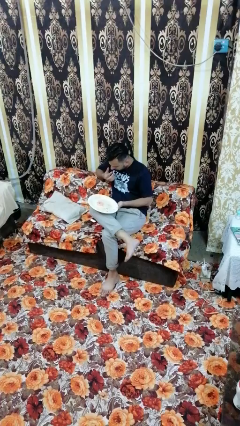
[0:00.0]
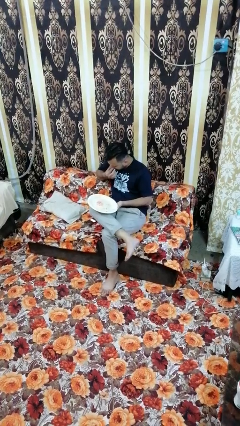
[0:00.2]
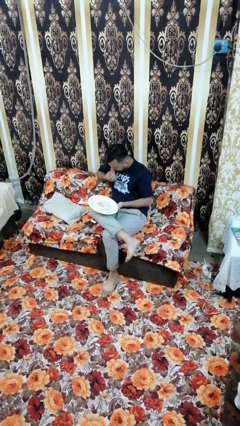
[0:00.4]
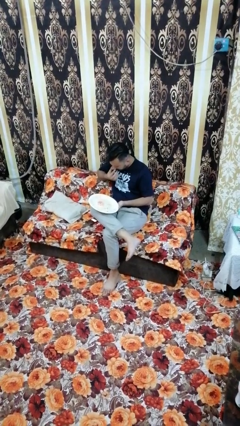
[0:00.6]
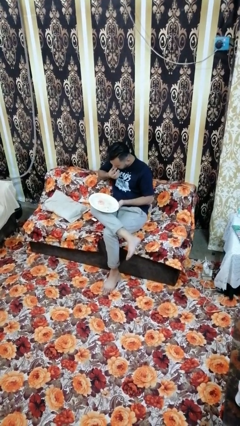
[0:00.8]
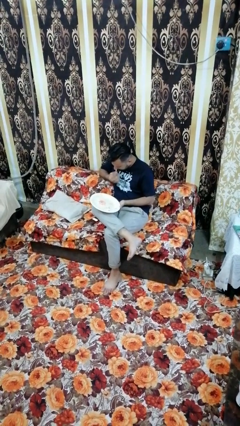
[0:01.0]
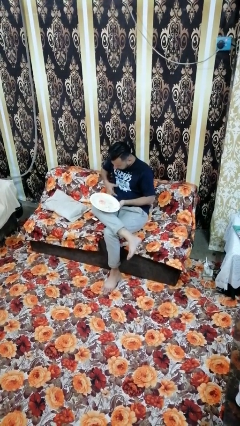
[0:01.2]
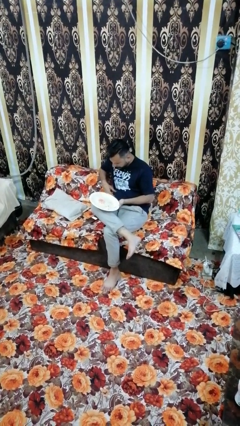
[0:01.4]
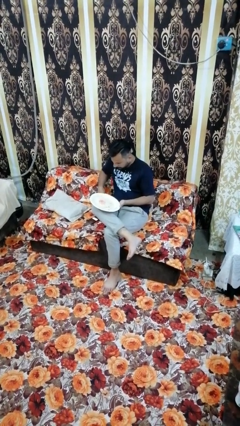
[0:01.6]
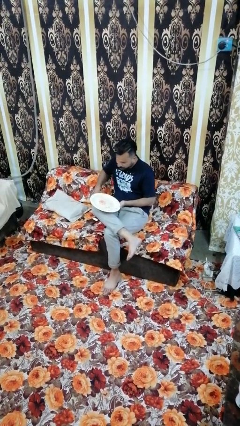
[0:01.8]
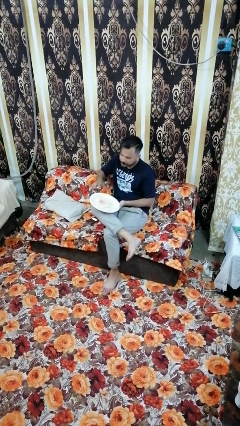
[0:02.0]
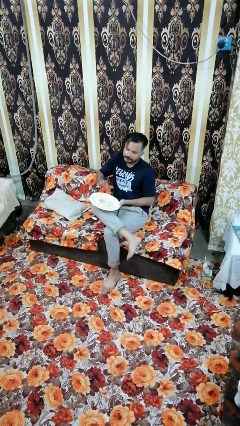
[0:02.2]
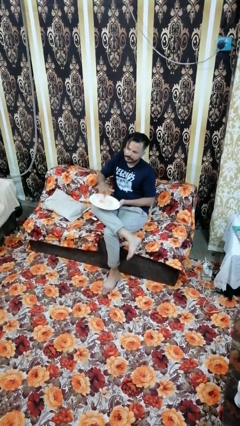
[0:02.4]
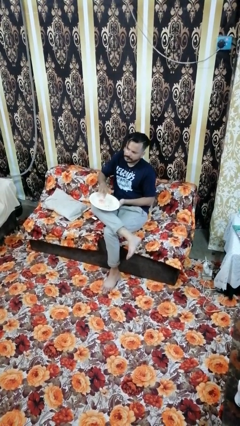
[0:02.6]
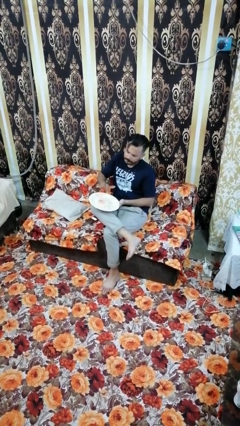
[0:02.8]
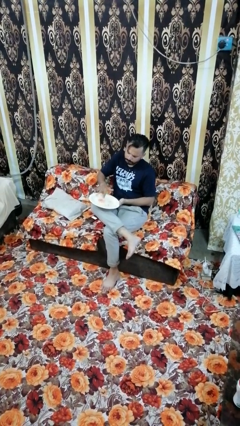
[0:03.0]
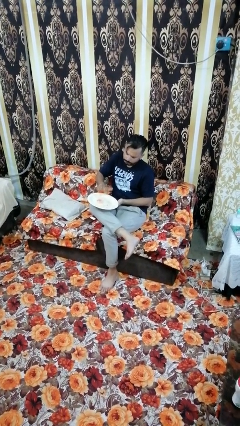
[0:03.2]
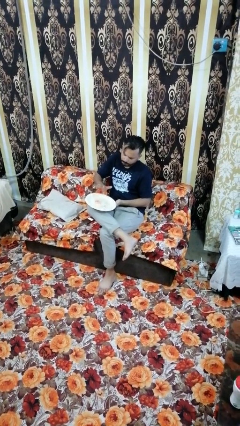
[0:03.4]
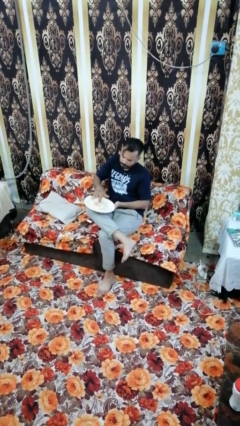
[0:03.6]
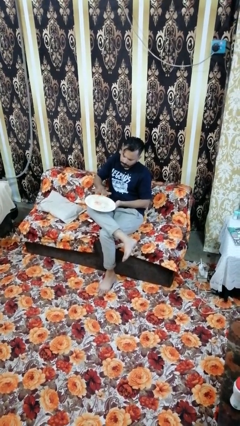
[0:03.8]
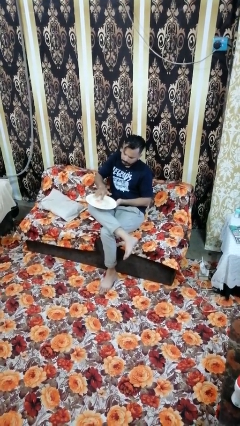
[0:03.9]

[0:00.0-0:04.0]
person taps object with finger

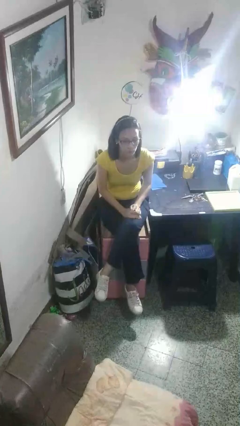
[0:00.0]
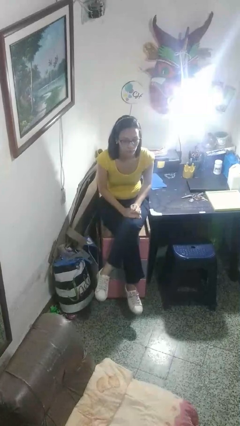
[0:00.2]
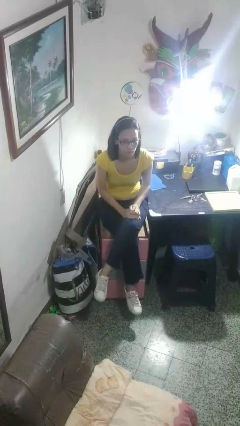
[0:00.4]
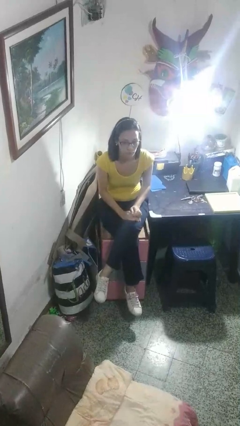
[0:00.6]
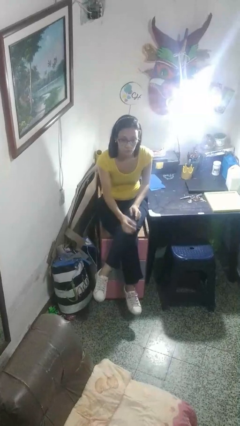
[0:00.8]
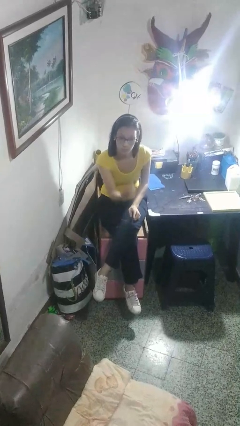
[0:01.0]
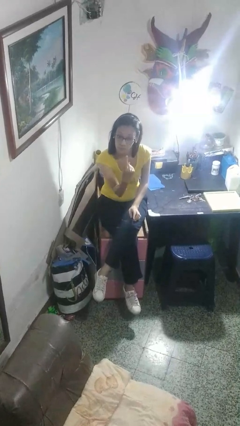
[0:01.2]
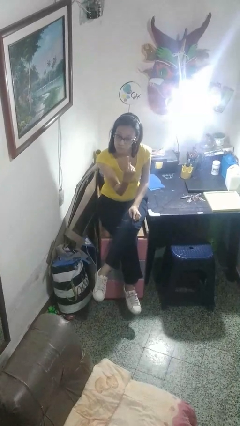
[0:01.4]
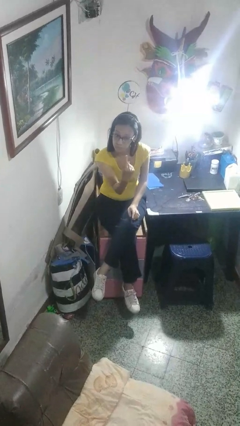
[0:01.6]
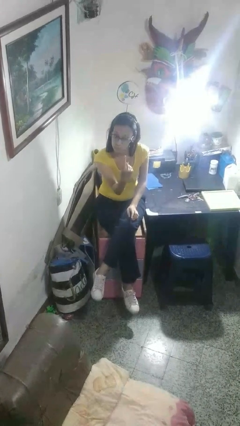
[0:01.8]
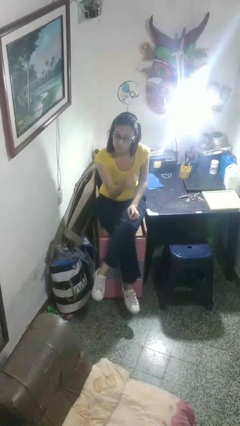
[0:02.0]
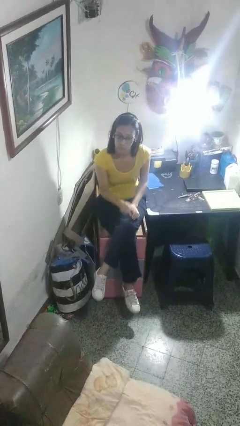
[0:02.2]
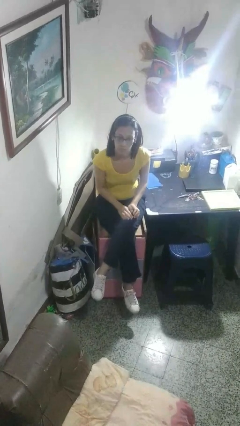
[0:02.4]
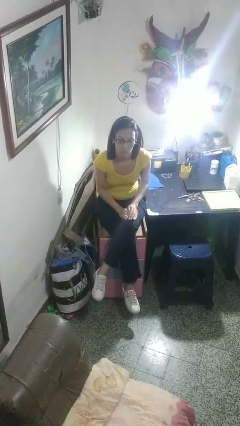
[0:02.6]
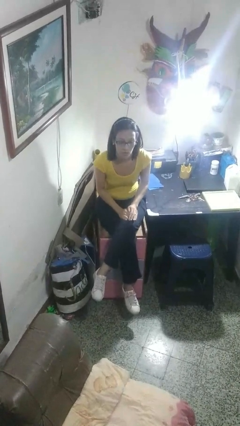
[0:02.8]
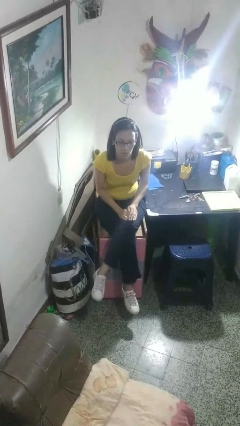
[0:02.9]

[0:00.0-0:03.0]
person gestures number one

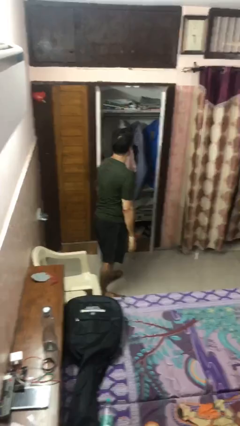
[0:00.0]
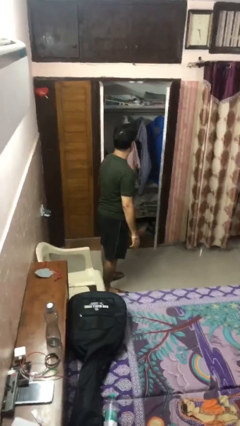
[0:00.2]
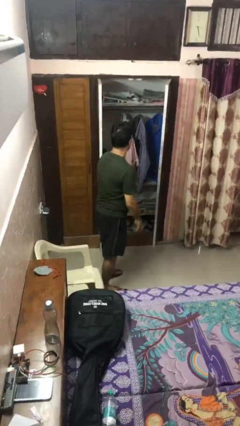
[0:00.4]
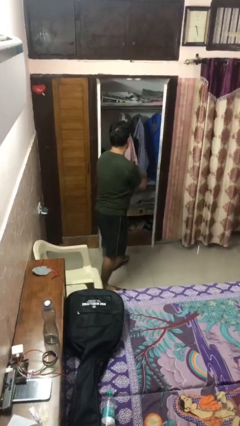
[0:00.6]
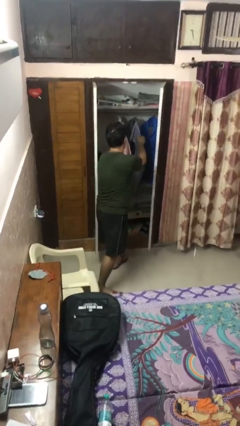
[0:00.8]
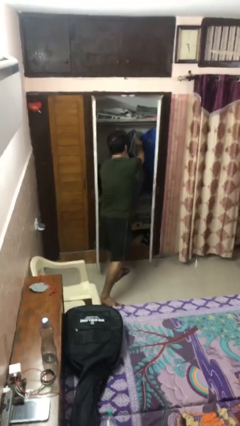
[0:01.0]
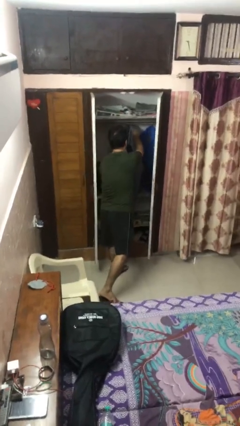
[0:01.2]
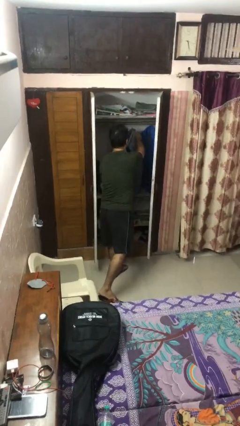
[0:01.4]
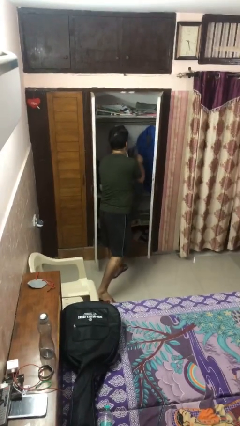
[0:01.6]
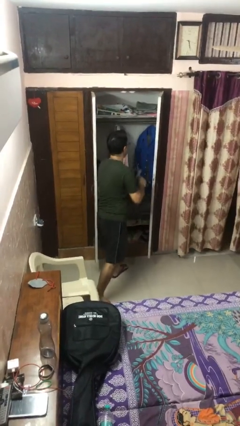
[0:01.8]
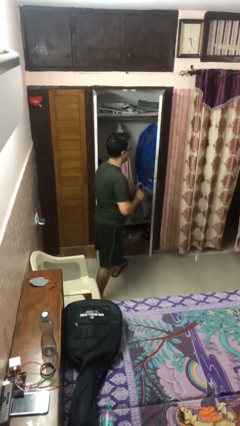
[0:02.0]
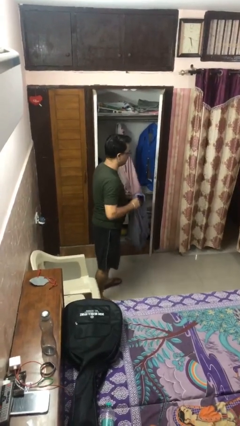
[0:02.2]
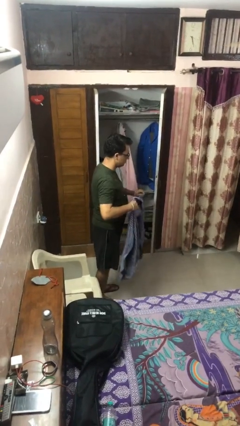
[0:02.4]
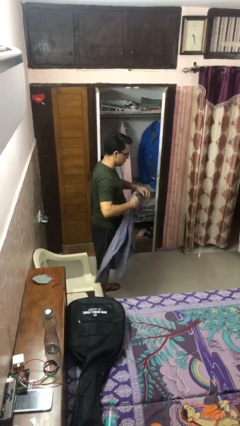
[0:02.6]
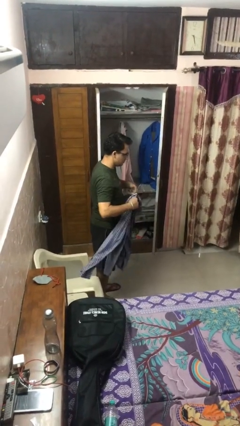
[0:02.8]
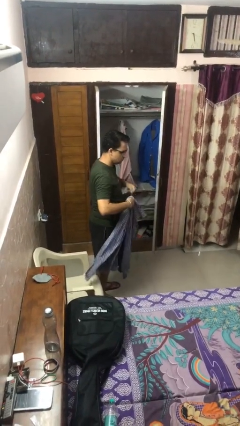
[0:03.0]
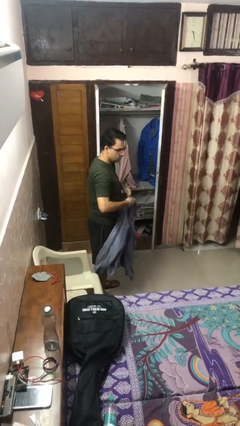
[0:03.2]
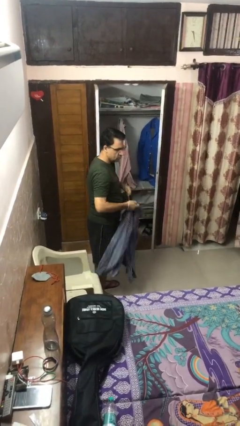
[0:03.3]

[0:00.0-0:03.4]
person takes clothes from closet

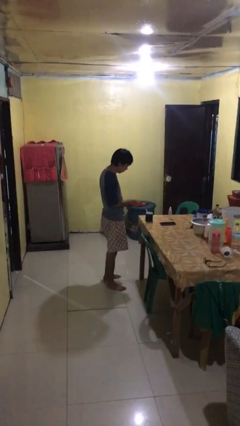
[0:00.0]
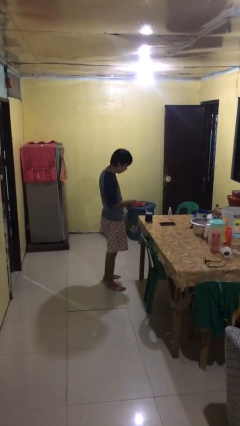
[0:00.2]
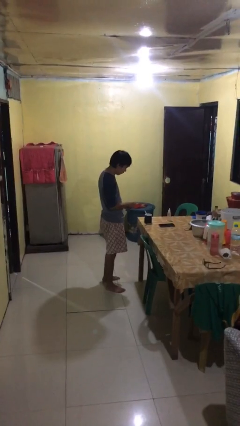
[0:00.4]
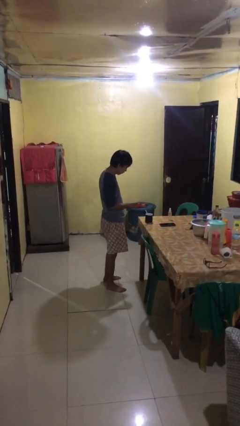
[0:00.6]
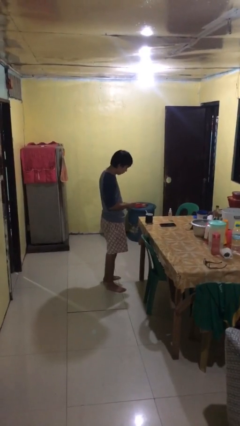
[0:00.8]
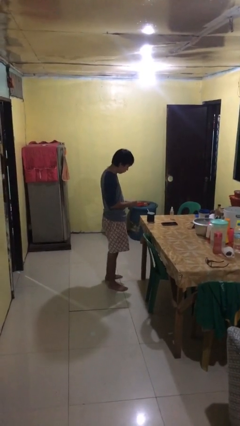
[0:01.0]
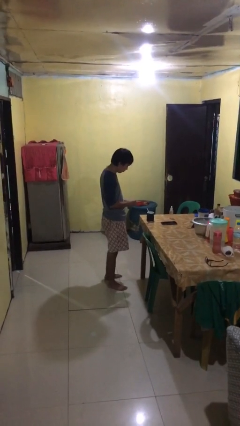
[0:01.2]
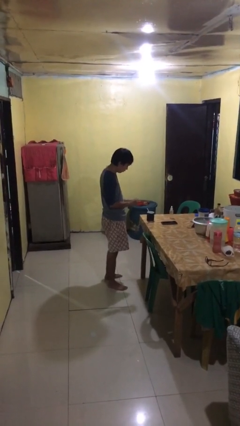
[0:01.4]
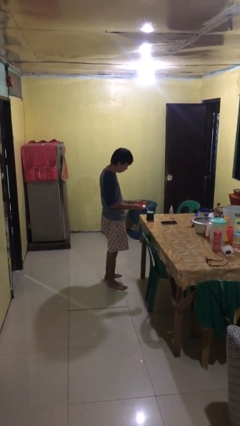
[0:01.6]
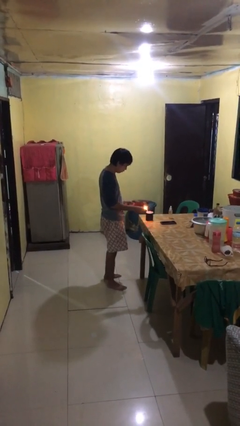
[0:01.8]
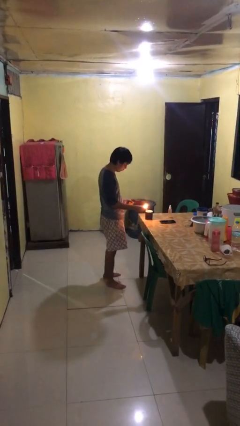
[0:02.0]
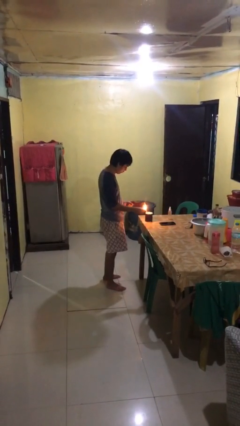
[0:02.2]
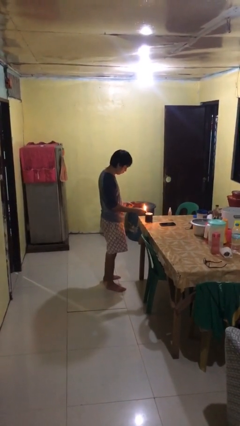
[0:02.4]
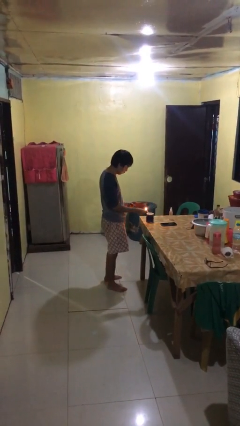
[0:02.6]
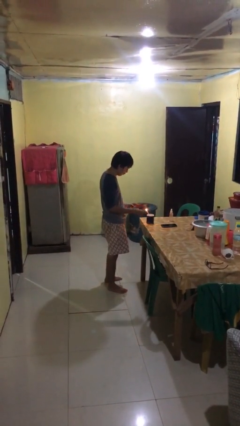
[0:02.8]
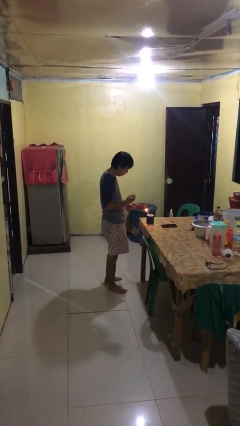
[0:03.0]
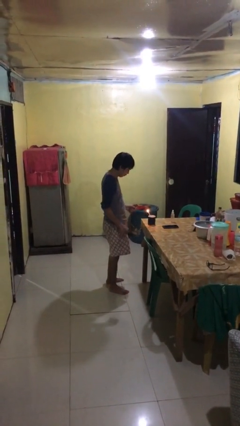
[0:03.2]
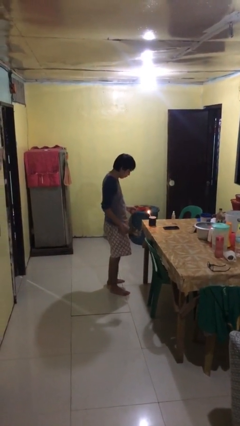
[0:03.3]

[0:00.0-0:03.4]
person lights candle

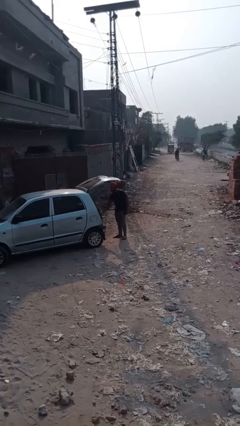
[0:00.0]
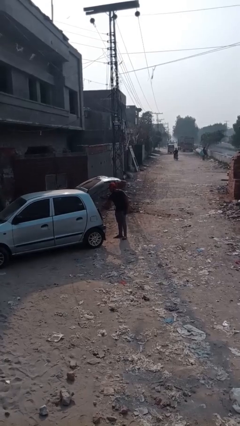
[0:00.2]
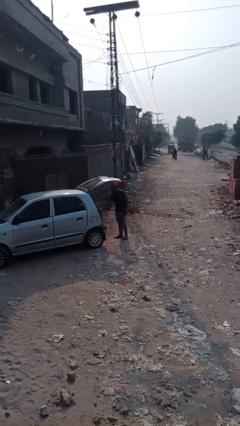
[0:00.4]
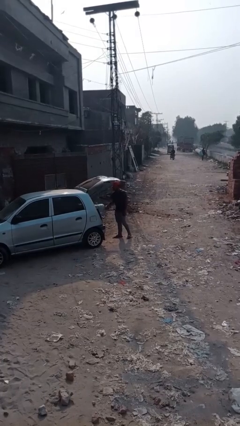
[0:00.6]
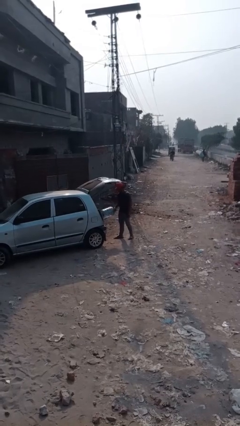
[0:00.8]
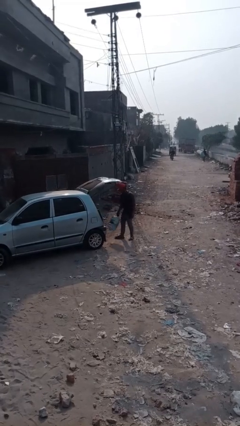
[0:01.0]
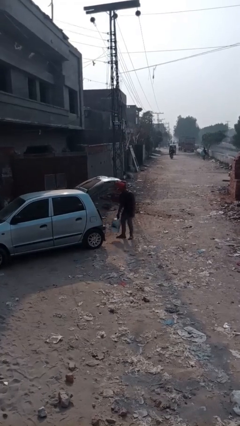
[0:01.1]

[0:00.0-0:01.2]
person unloads car

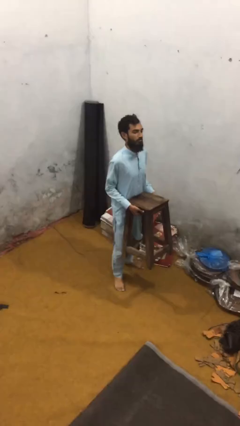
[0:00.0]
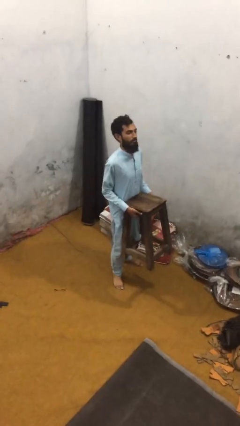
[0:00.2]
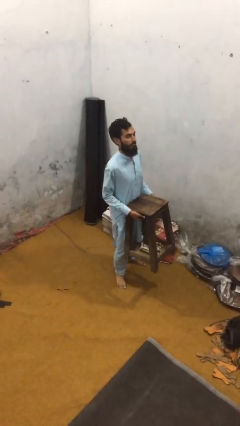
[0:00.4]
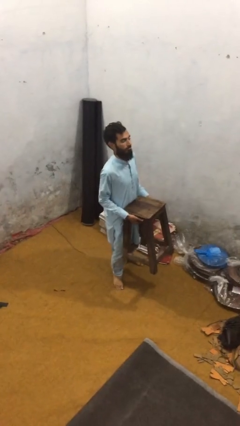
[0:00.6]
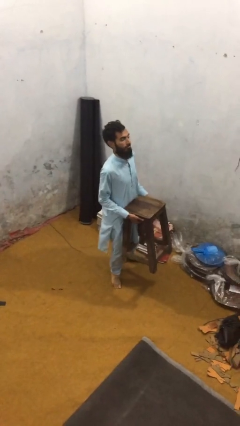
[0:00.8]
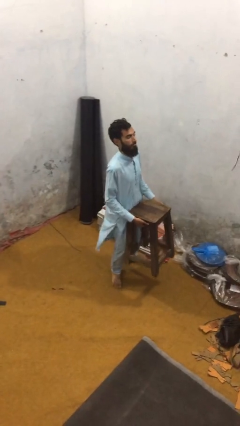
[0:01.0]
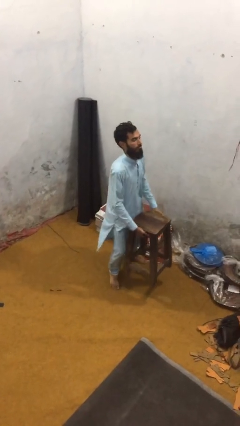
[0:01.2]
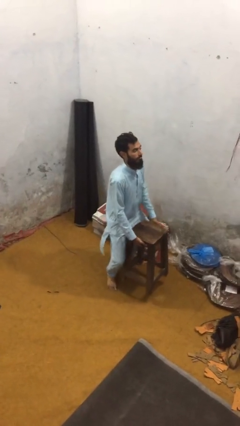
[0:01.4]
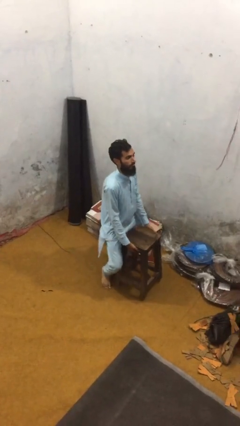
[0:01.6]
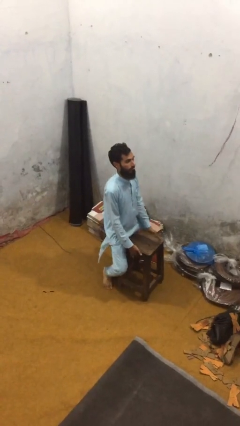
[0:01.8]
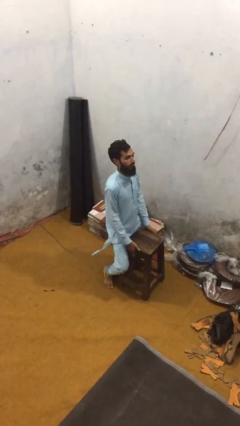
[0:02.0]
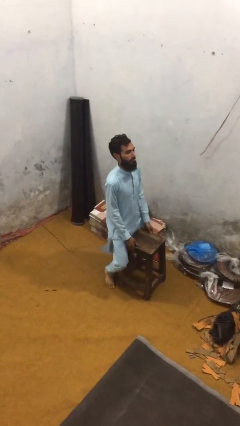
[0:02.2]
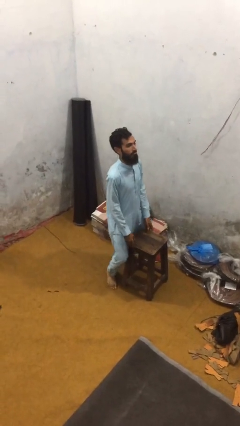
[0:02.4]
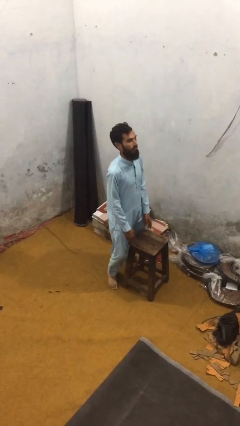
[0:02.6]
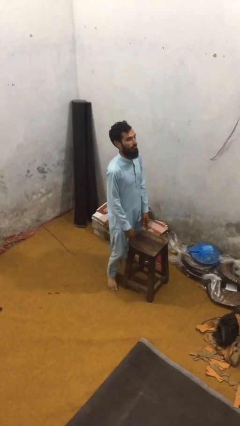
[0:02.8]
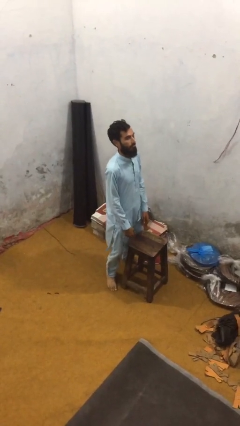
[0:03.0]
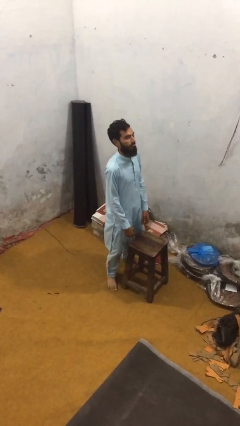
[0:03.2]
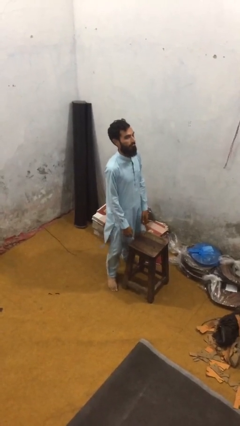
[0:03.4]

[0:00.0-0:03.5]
person puts down object on floor
